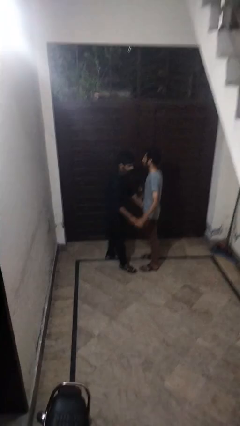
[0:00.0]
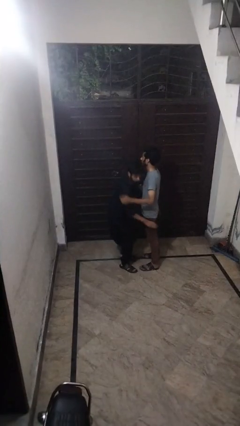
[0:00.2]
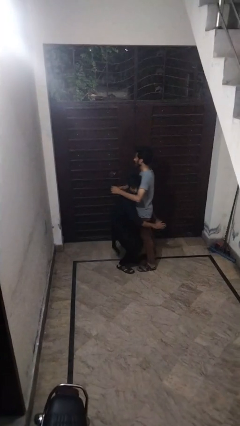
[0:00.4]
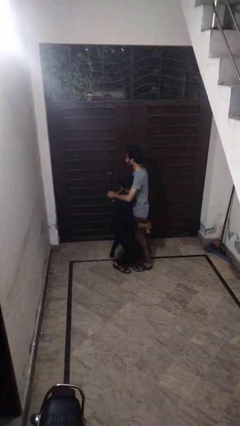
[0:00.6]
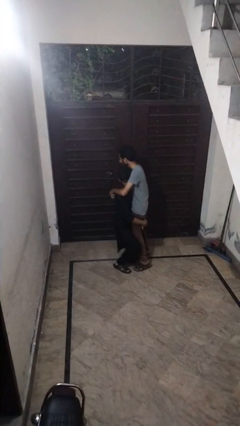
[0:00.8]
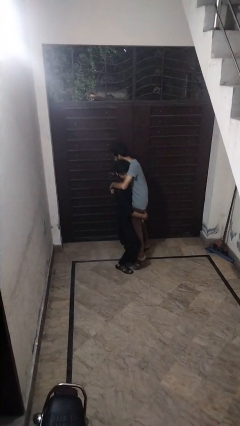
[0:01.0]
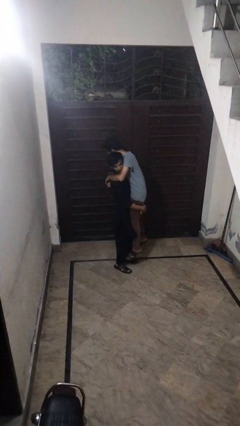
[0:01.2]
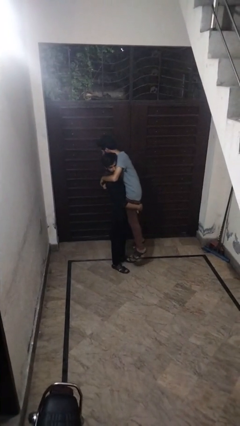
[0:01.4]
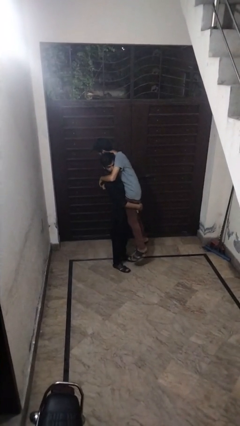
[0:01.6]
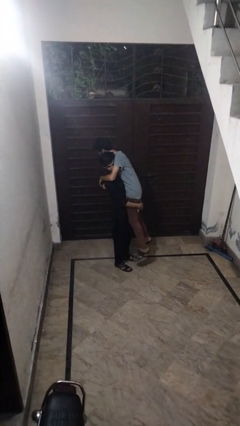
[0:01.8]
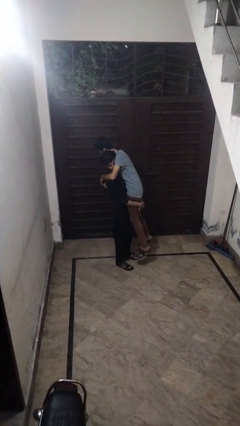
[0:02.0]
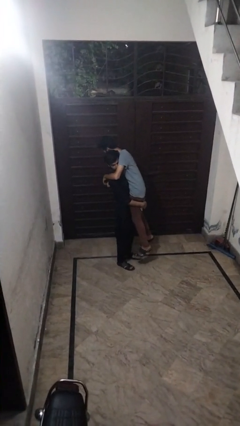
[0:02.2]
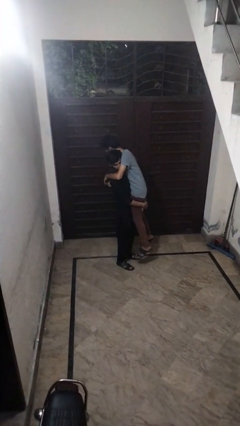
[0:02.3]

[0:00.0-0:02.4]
person picks up person

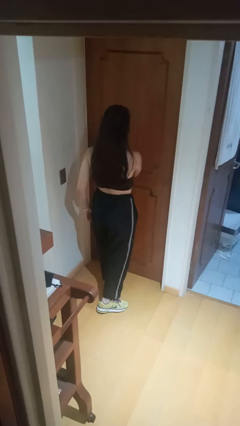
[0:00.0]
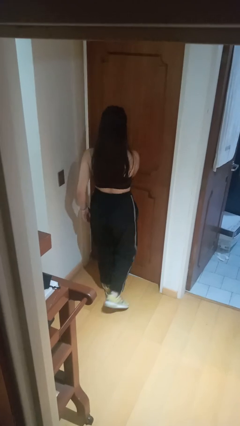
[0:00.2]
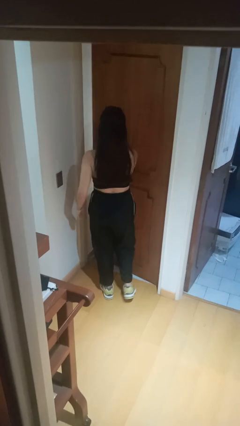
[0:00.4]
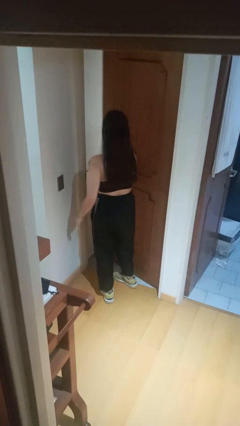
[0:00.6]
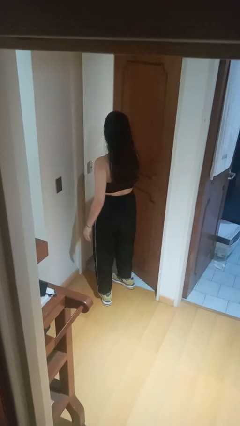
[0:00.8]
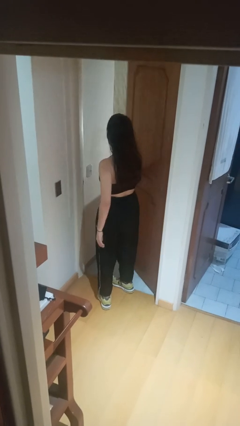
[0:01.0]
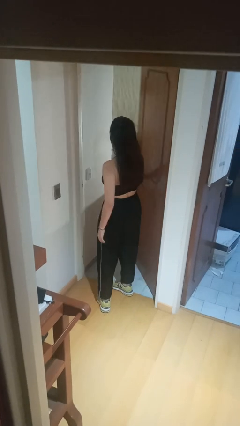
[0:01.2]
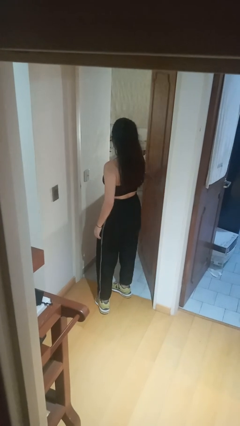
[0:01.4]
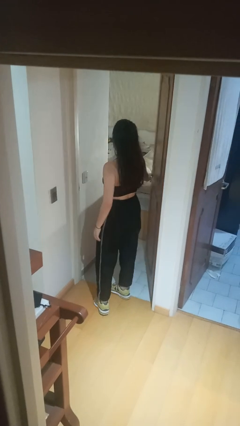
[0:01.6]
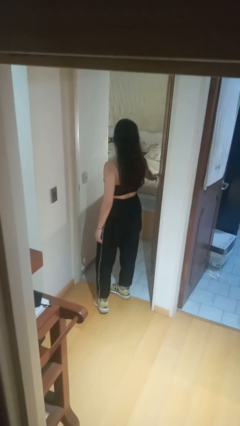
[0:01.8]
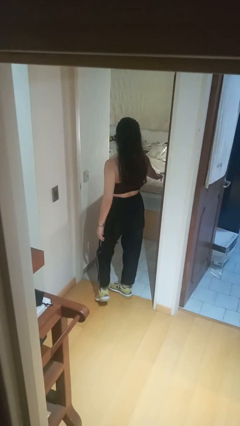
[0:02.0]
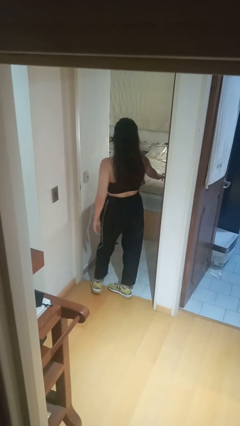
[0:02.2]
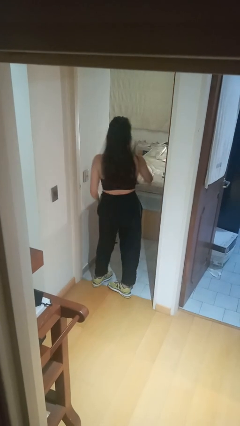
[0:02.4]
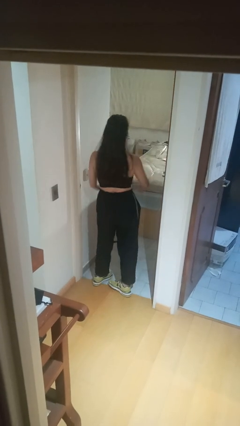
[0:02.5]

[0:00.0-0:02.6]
person opens facility door

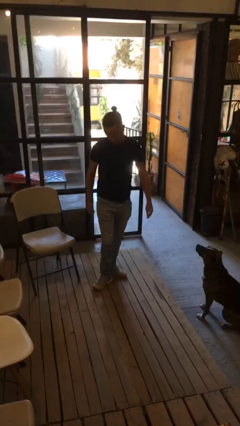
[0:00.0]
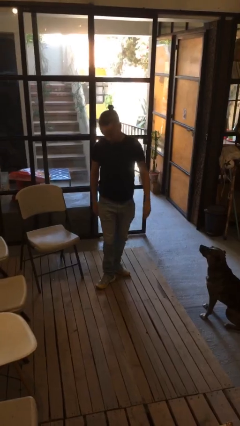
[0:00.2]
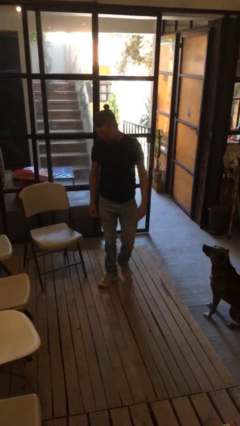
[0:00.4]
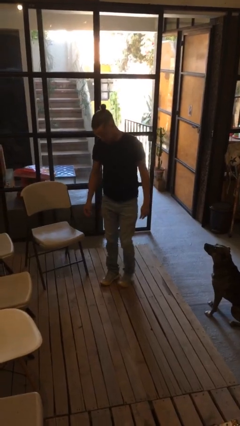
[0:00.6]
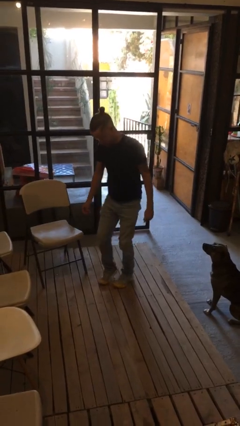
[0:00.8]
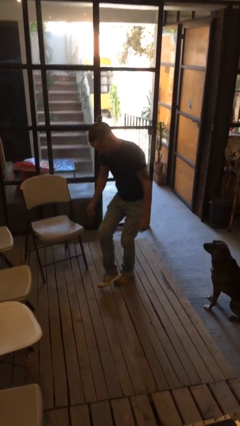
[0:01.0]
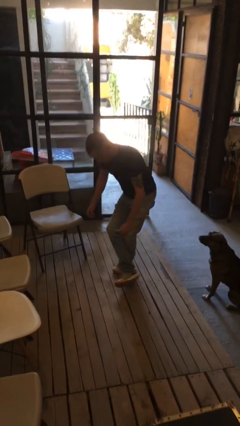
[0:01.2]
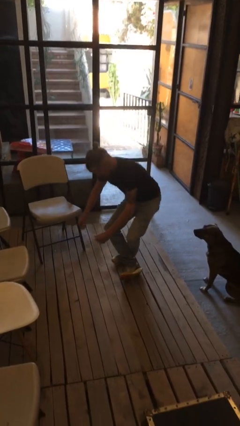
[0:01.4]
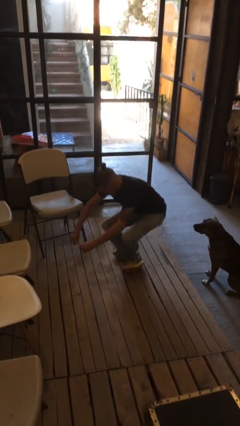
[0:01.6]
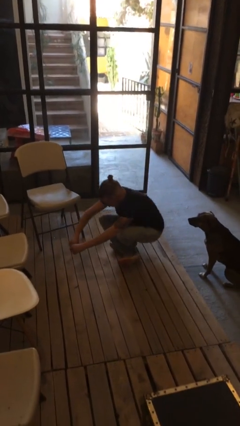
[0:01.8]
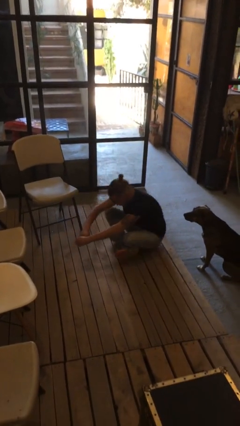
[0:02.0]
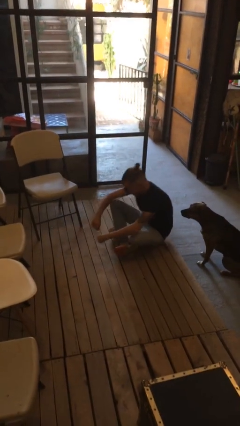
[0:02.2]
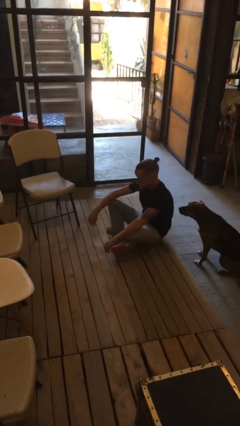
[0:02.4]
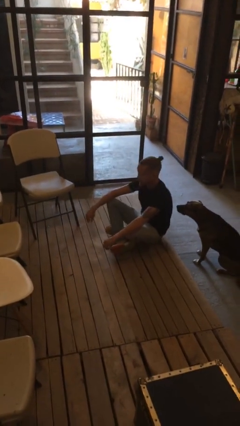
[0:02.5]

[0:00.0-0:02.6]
person sits crisscross

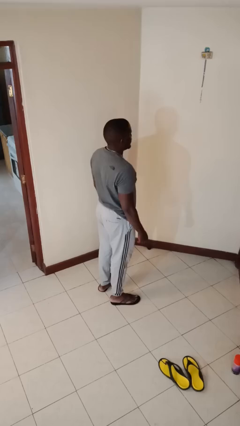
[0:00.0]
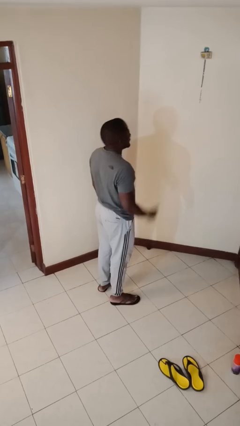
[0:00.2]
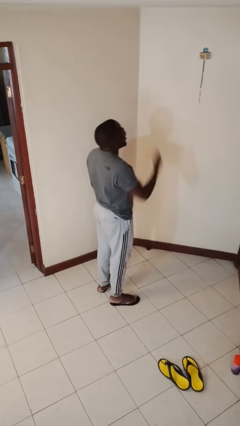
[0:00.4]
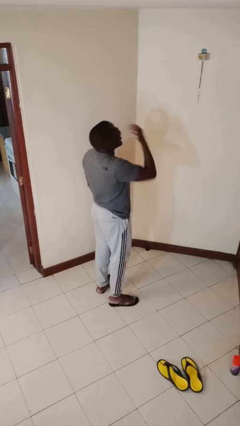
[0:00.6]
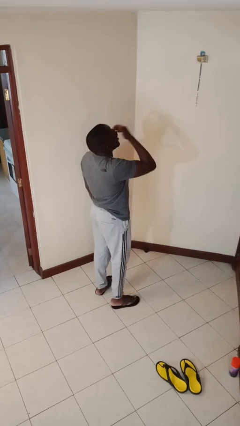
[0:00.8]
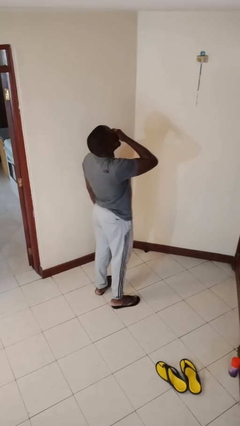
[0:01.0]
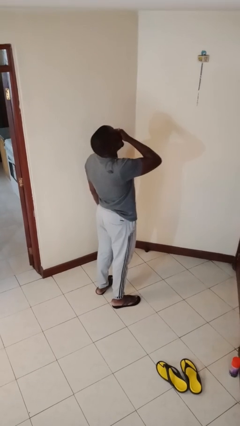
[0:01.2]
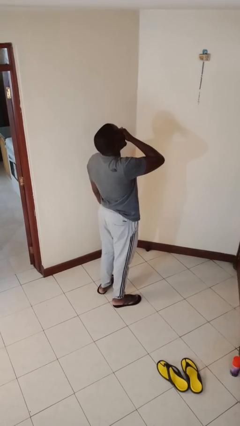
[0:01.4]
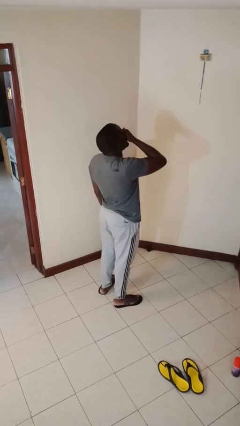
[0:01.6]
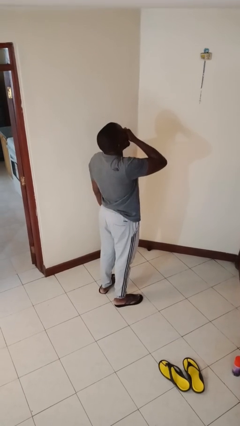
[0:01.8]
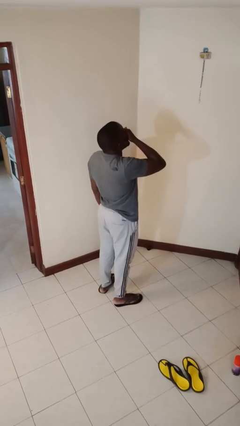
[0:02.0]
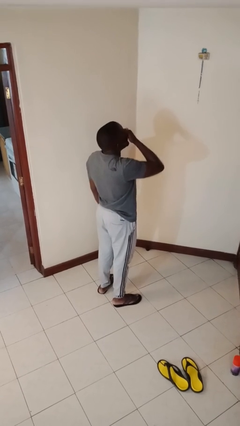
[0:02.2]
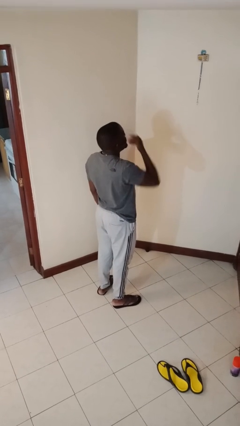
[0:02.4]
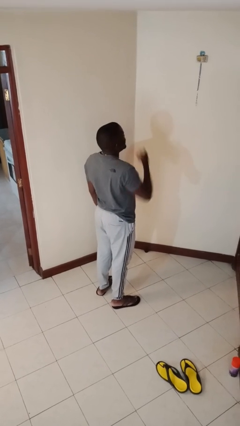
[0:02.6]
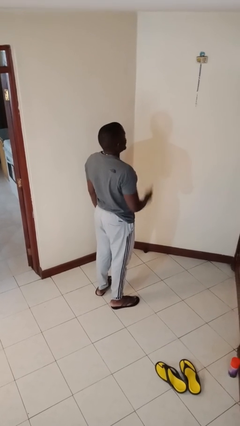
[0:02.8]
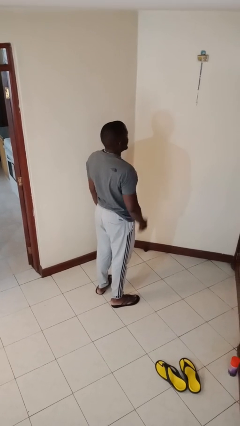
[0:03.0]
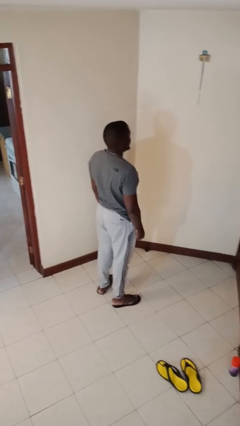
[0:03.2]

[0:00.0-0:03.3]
person yawns

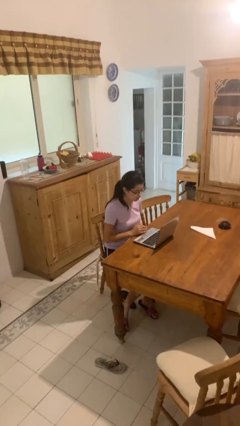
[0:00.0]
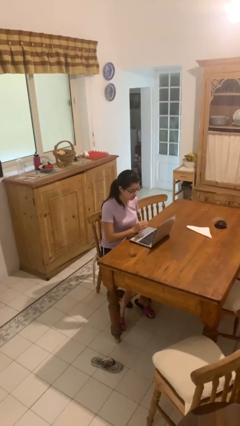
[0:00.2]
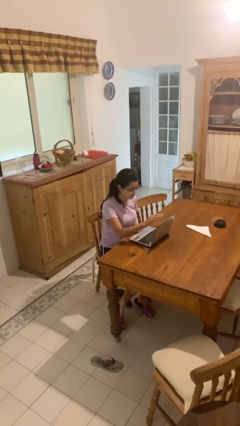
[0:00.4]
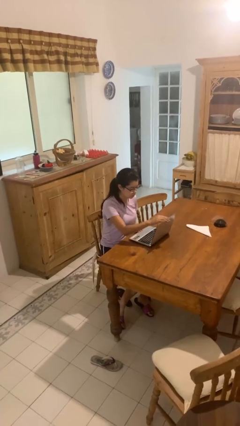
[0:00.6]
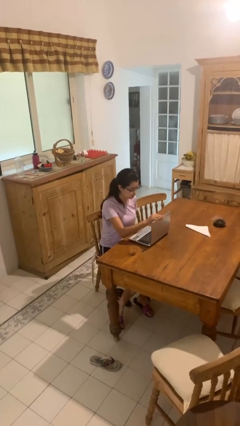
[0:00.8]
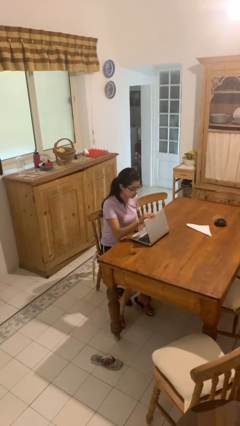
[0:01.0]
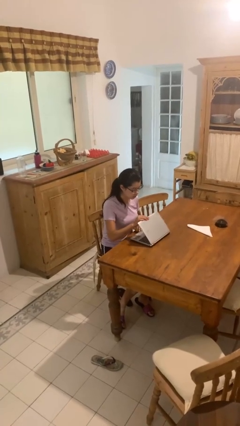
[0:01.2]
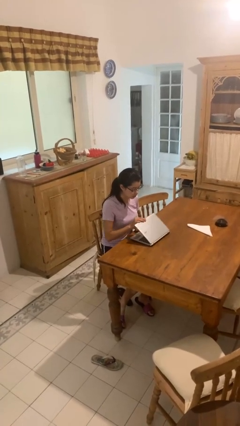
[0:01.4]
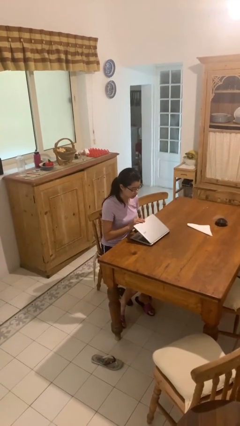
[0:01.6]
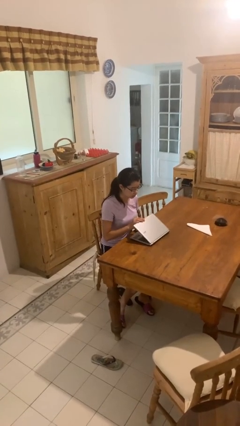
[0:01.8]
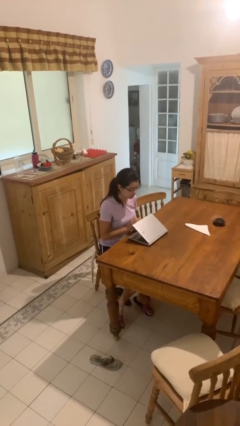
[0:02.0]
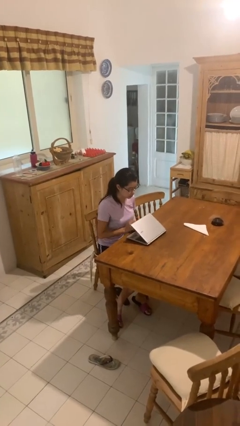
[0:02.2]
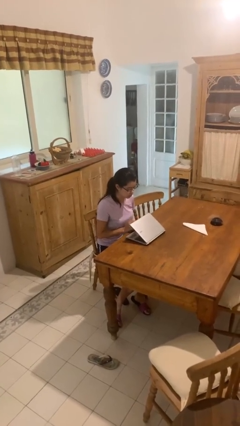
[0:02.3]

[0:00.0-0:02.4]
person closes laptop

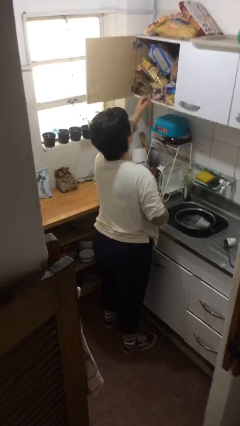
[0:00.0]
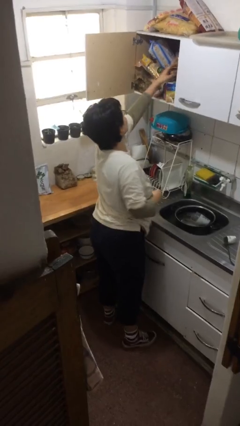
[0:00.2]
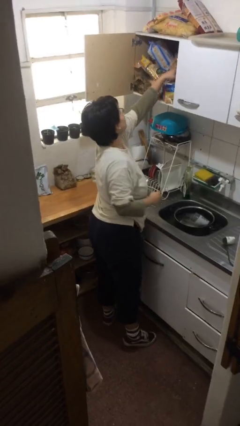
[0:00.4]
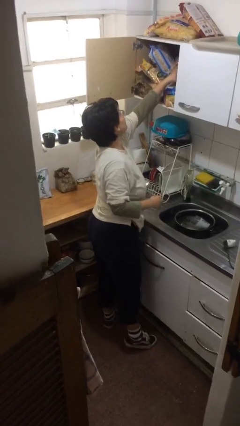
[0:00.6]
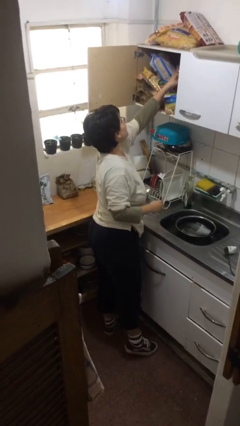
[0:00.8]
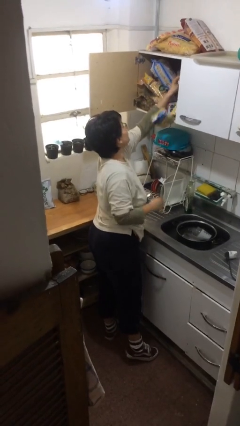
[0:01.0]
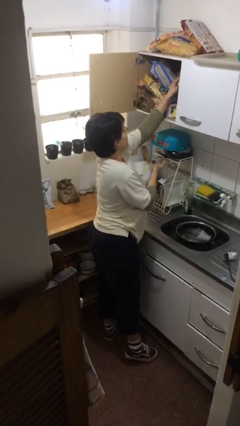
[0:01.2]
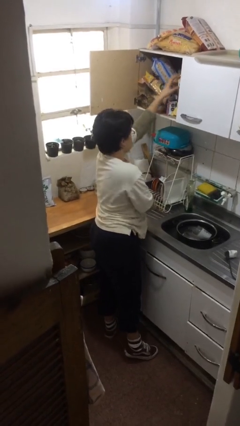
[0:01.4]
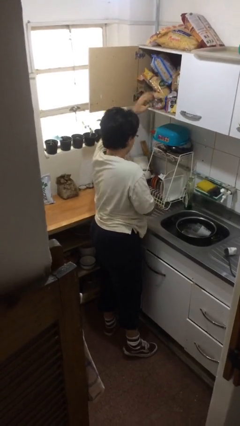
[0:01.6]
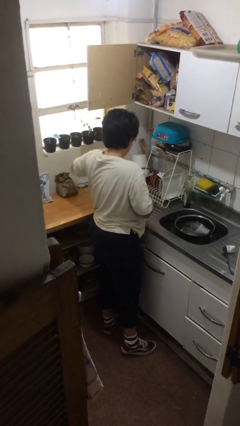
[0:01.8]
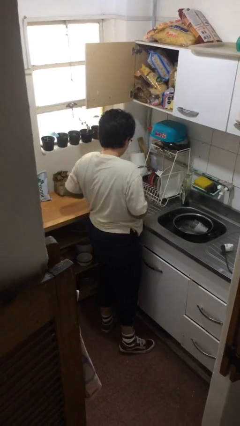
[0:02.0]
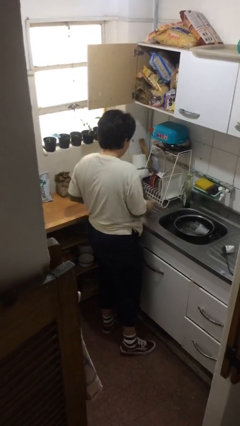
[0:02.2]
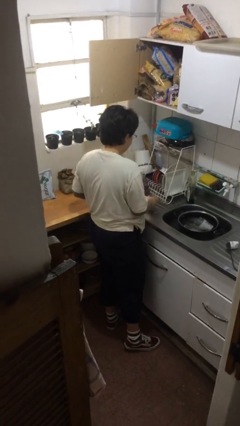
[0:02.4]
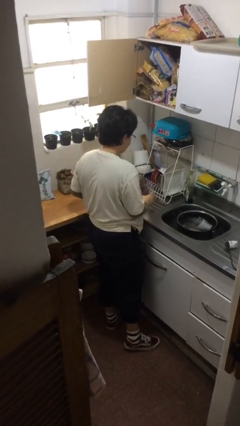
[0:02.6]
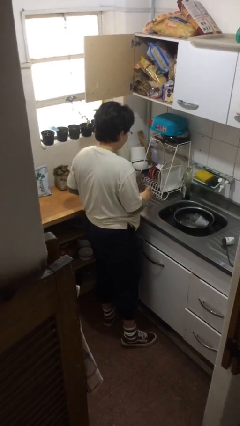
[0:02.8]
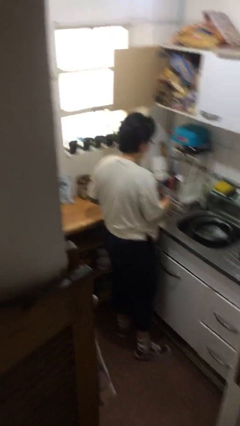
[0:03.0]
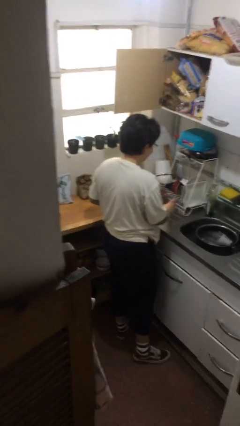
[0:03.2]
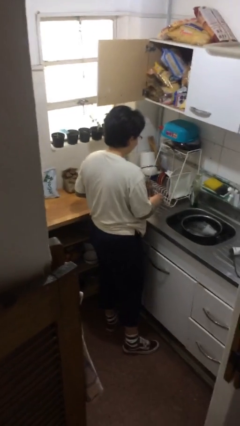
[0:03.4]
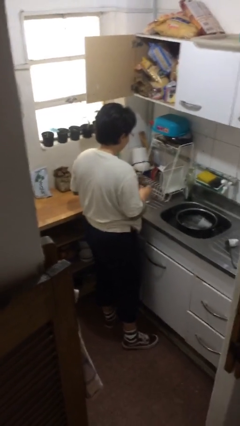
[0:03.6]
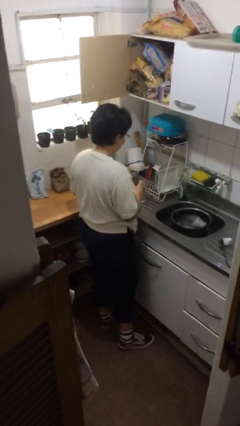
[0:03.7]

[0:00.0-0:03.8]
person takes object from cabinet

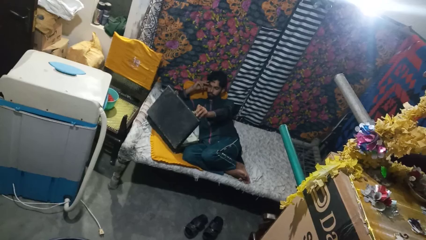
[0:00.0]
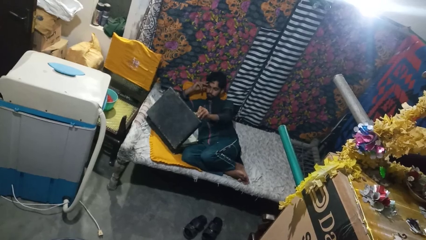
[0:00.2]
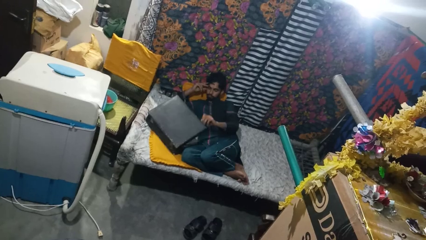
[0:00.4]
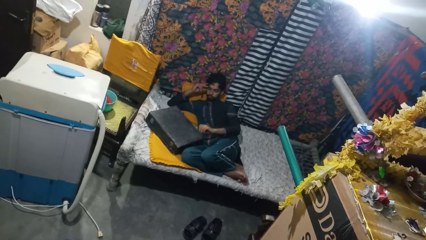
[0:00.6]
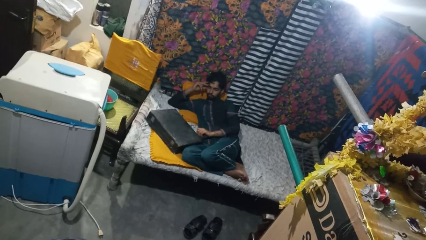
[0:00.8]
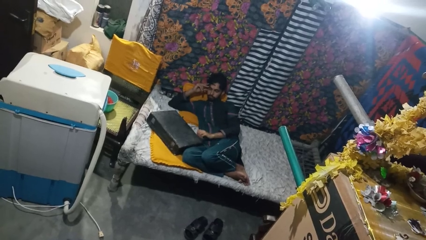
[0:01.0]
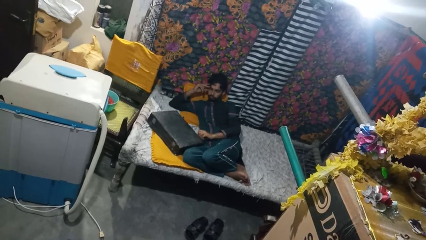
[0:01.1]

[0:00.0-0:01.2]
person closes suitcase
